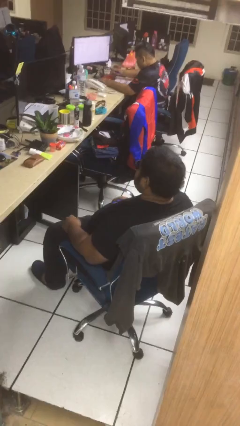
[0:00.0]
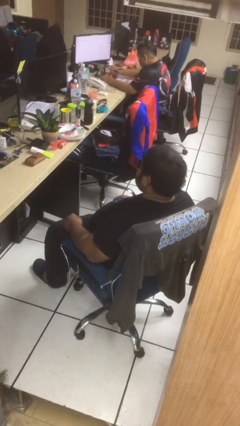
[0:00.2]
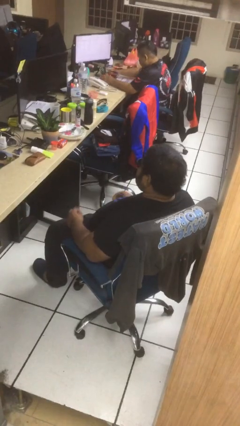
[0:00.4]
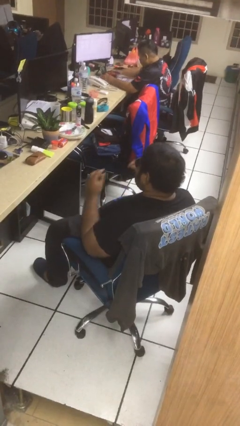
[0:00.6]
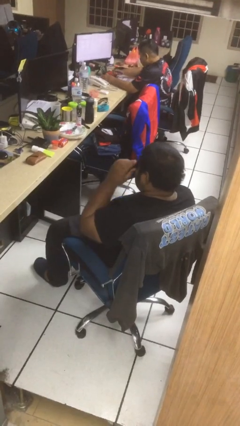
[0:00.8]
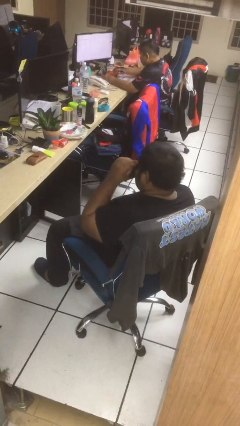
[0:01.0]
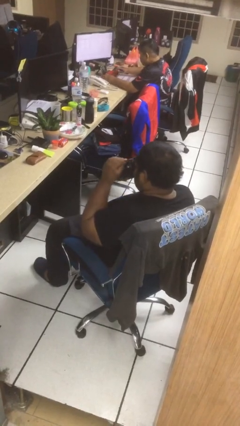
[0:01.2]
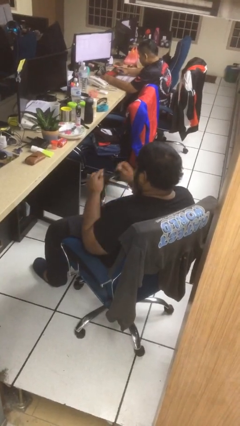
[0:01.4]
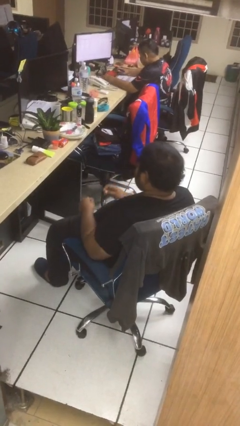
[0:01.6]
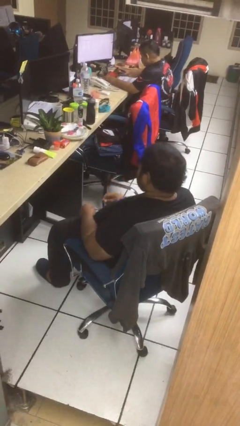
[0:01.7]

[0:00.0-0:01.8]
person takes off sunglasses

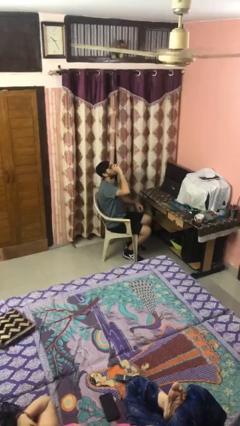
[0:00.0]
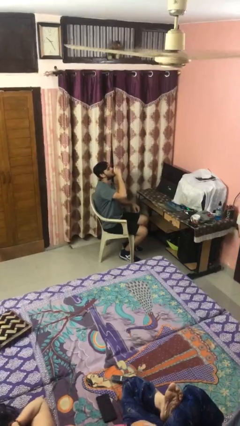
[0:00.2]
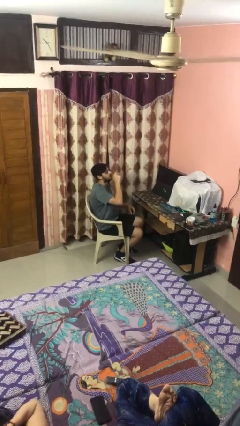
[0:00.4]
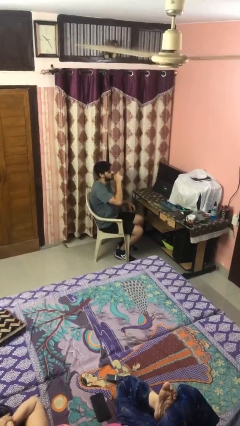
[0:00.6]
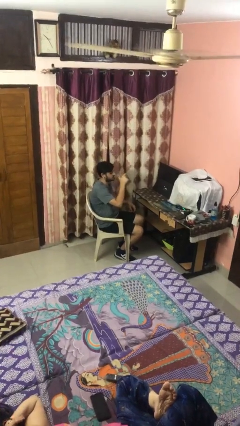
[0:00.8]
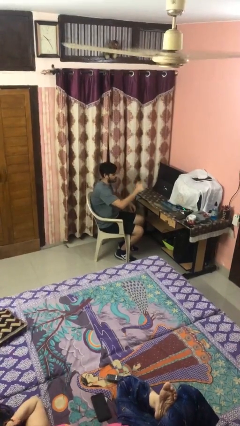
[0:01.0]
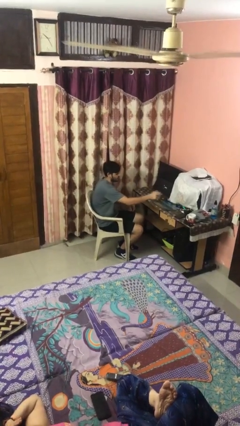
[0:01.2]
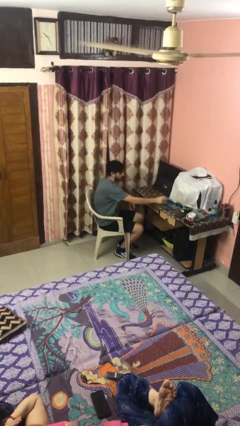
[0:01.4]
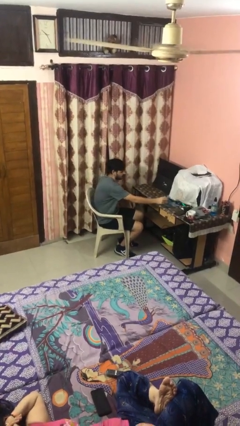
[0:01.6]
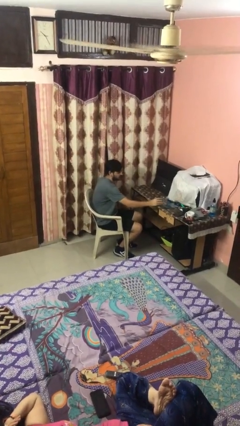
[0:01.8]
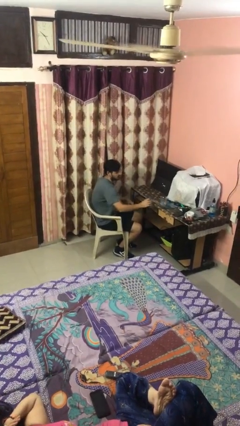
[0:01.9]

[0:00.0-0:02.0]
person puts down object on table

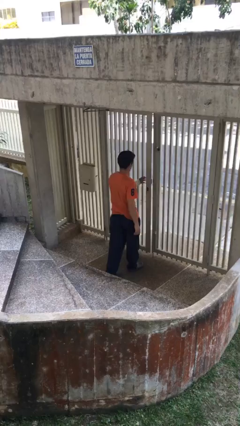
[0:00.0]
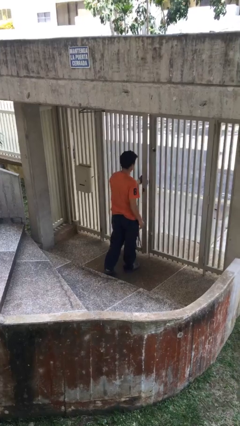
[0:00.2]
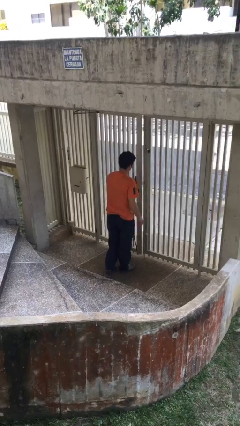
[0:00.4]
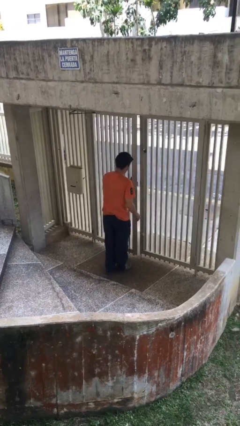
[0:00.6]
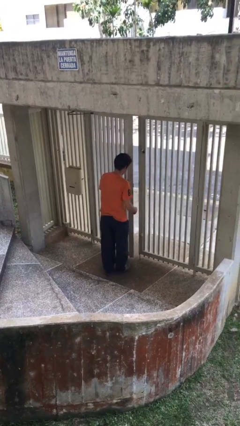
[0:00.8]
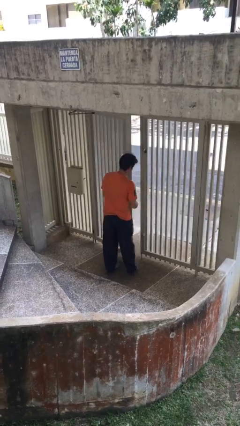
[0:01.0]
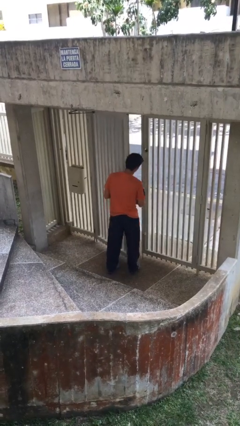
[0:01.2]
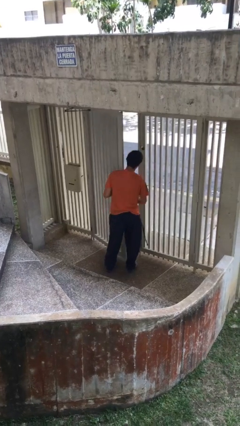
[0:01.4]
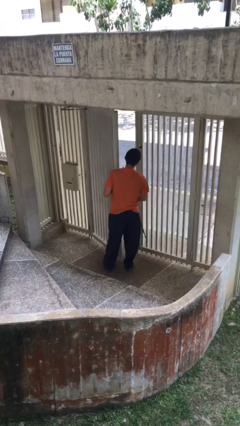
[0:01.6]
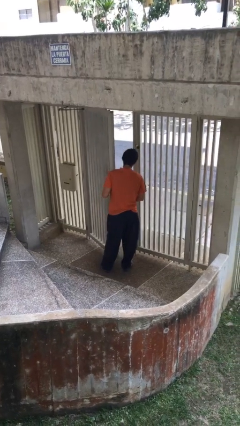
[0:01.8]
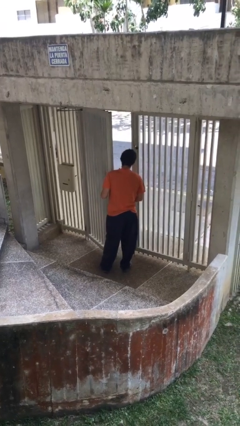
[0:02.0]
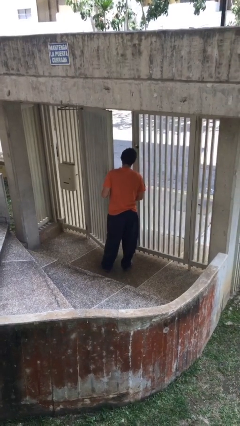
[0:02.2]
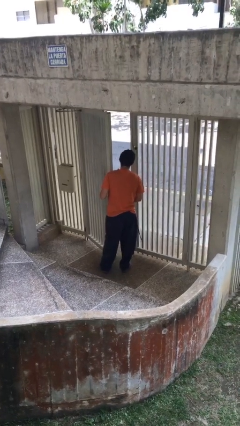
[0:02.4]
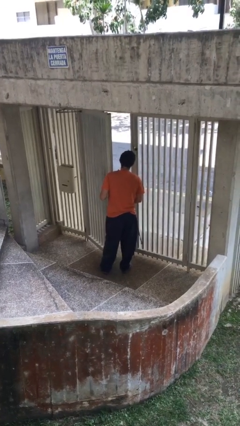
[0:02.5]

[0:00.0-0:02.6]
person opens facility door

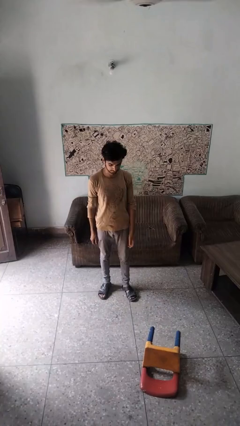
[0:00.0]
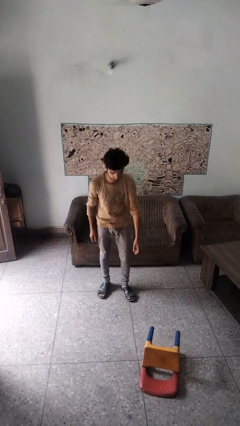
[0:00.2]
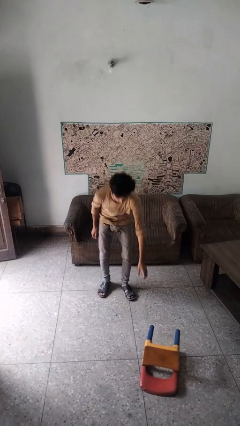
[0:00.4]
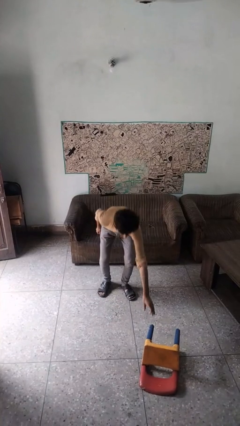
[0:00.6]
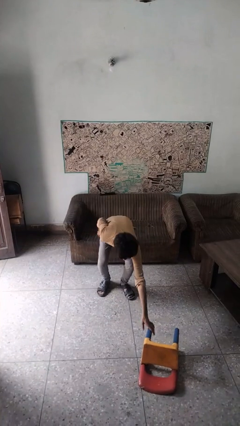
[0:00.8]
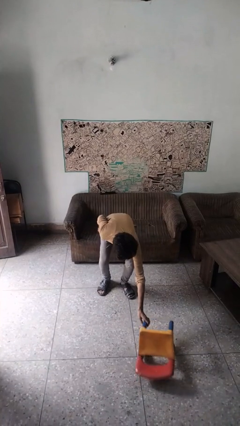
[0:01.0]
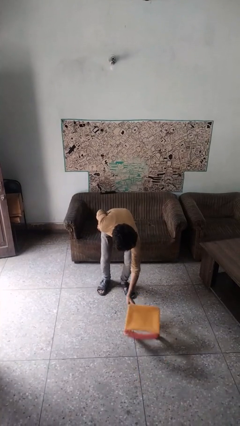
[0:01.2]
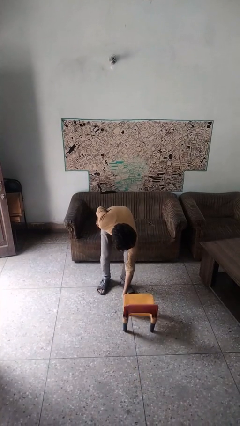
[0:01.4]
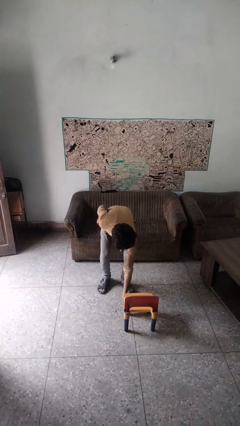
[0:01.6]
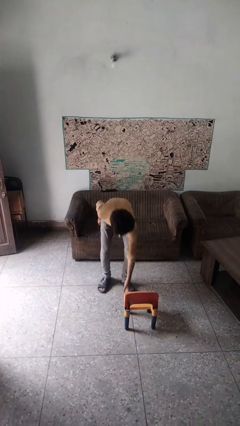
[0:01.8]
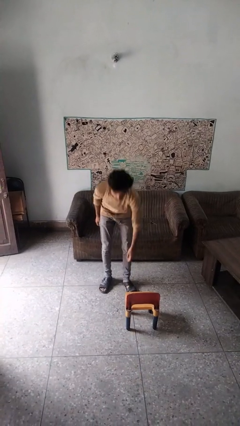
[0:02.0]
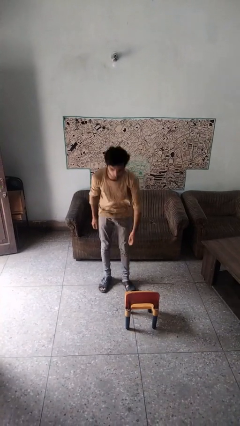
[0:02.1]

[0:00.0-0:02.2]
person sets upright furniture

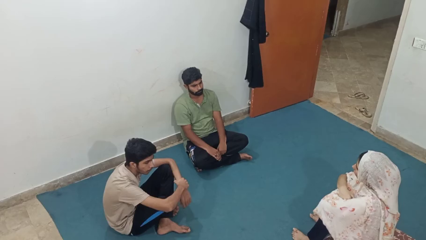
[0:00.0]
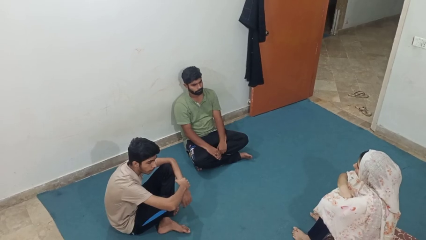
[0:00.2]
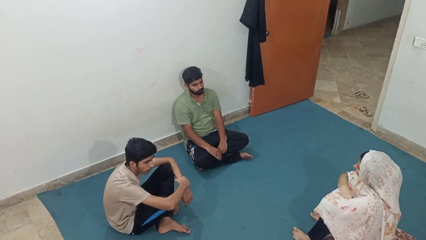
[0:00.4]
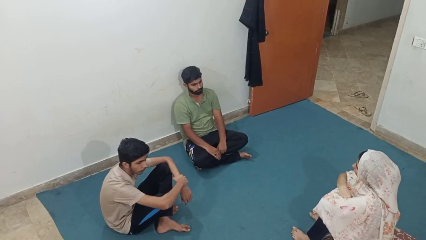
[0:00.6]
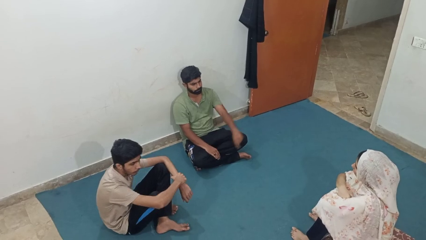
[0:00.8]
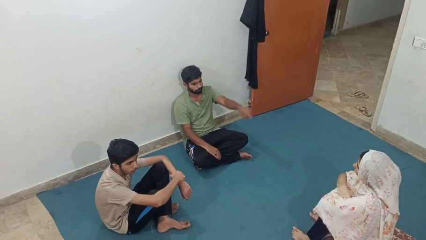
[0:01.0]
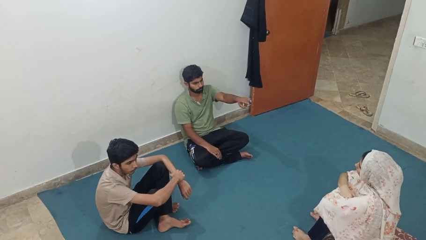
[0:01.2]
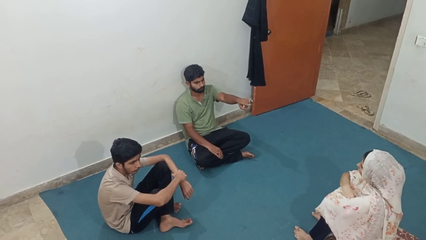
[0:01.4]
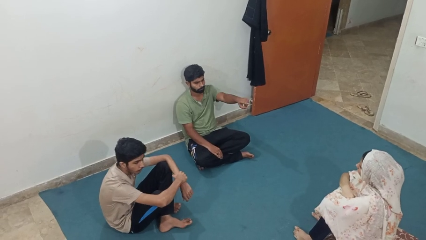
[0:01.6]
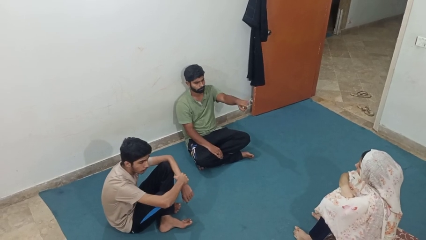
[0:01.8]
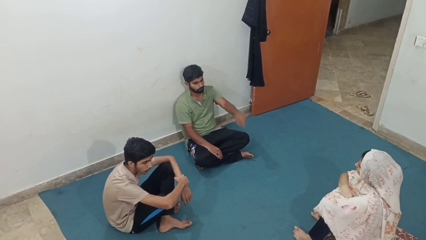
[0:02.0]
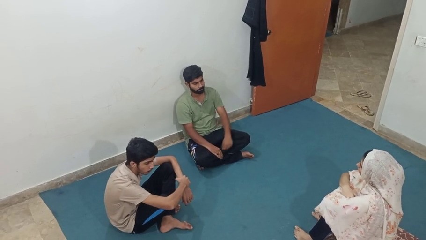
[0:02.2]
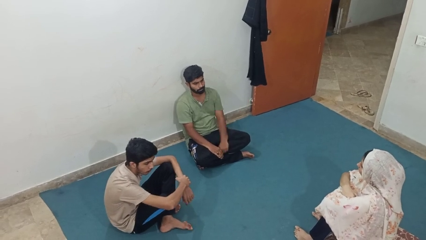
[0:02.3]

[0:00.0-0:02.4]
person points at person

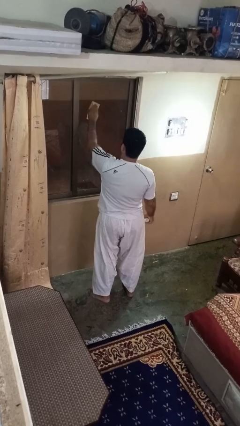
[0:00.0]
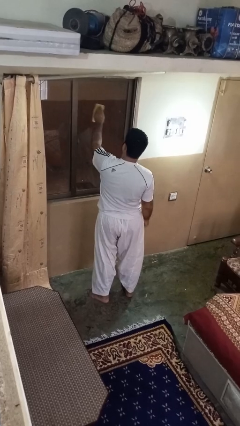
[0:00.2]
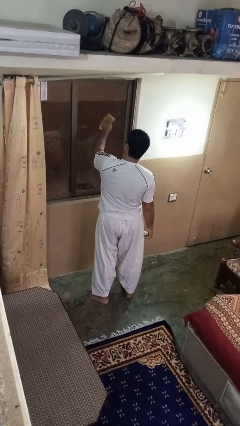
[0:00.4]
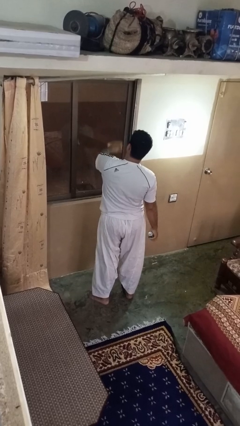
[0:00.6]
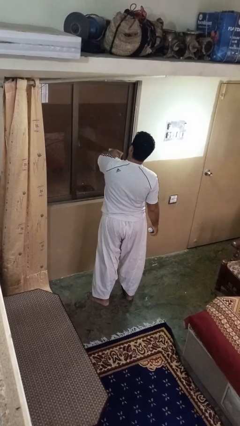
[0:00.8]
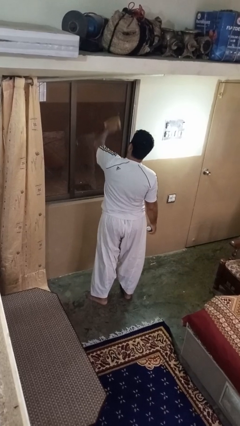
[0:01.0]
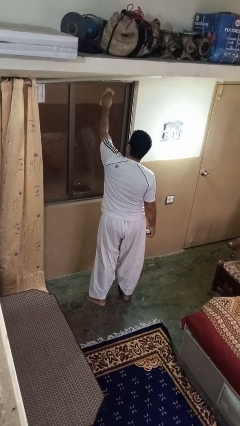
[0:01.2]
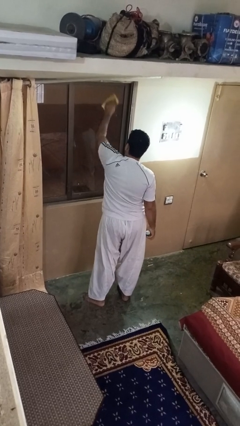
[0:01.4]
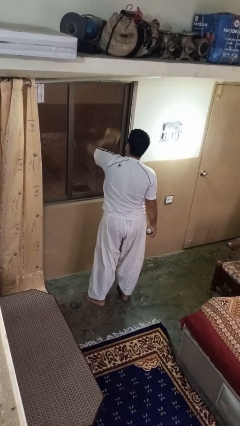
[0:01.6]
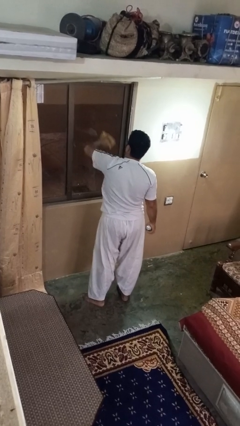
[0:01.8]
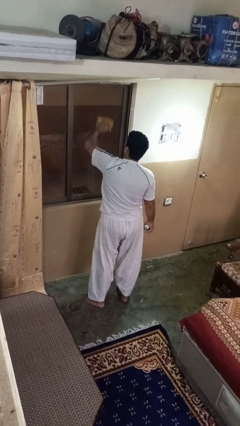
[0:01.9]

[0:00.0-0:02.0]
person washes window

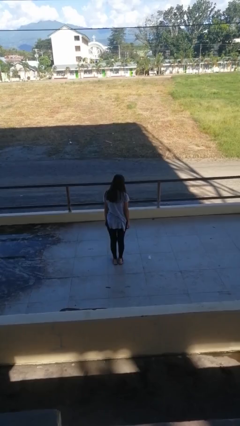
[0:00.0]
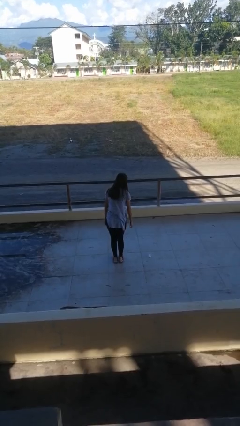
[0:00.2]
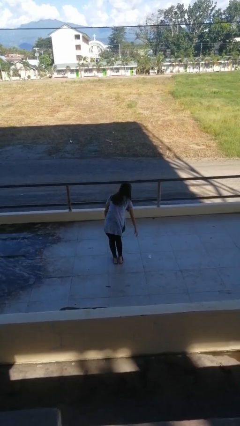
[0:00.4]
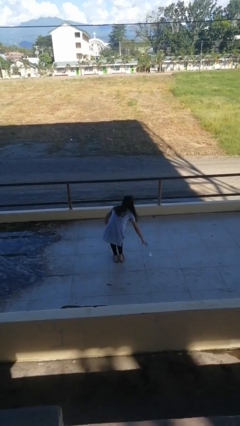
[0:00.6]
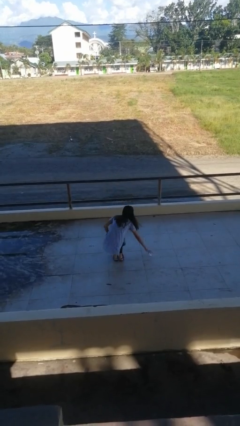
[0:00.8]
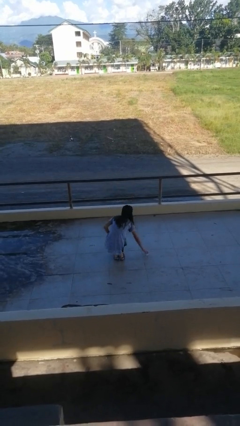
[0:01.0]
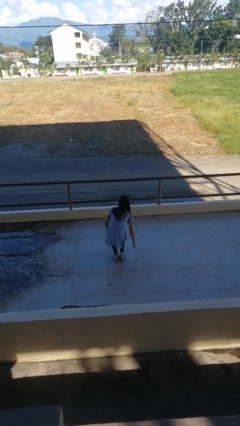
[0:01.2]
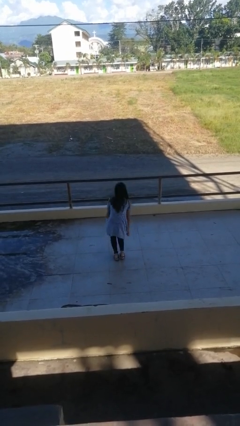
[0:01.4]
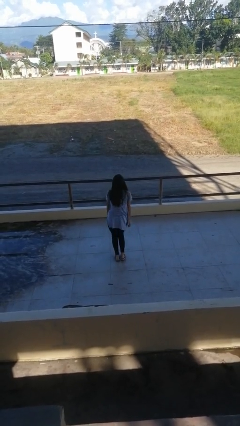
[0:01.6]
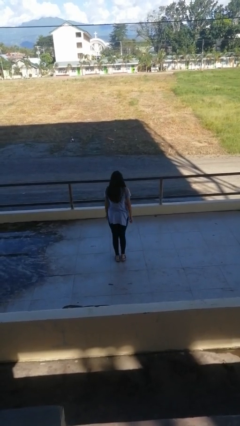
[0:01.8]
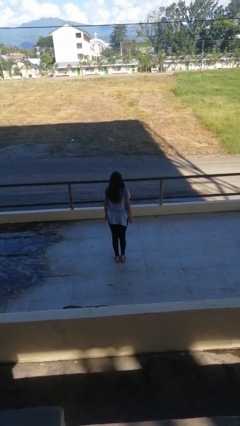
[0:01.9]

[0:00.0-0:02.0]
person picks up object from floor

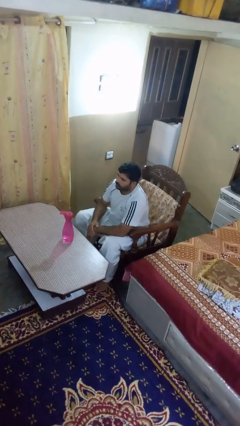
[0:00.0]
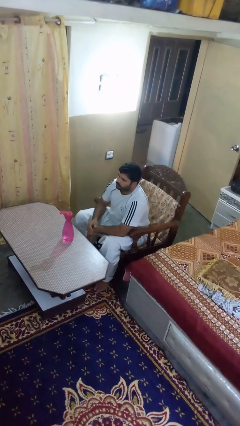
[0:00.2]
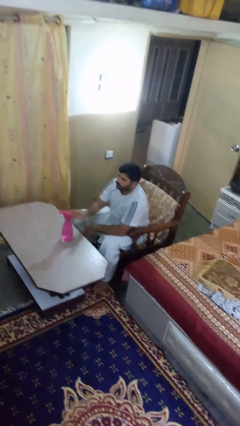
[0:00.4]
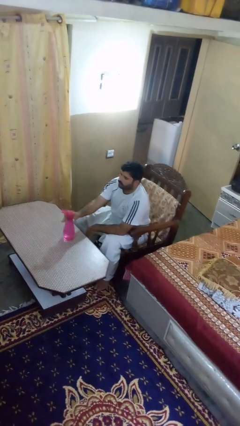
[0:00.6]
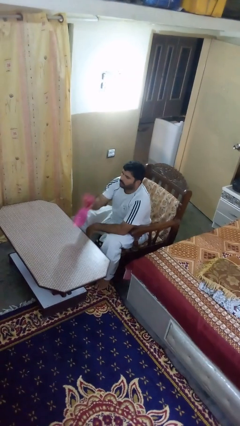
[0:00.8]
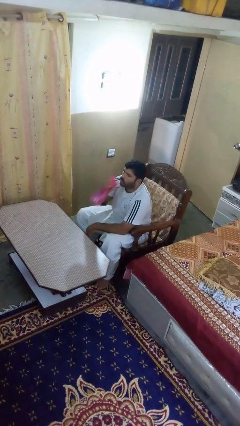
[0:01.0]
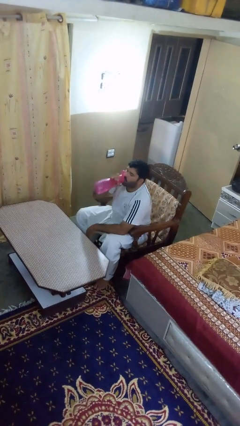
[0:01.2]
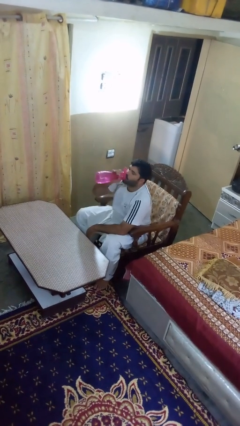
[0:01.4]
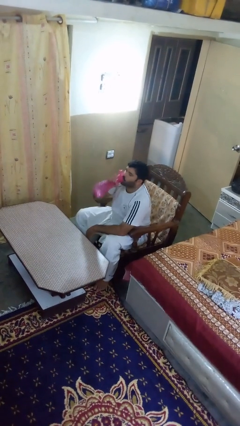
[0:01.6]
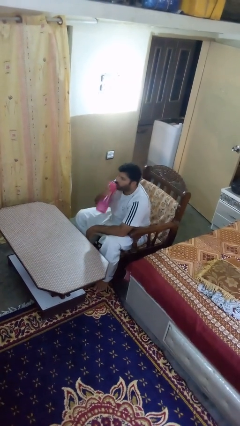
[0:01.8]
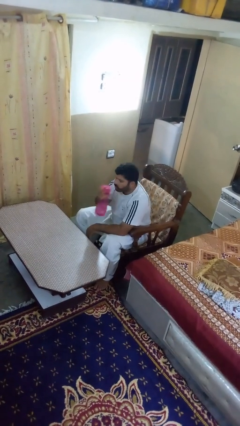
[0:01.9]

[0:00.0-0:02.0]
person drinks from bottle
